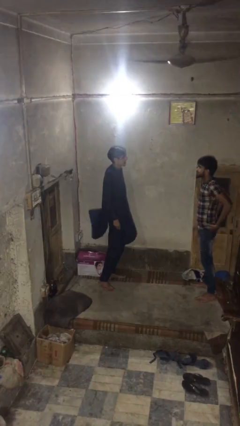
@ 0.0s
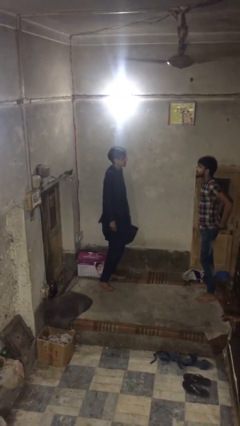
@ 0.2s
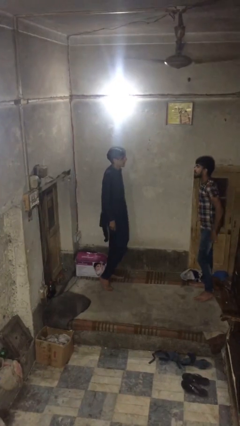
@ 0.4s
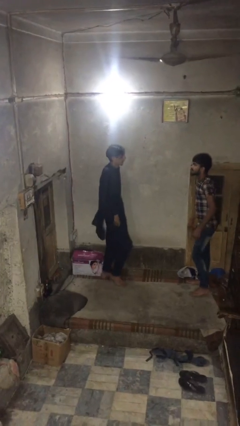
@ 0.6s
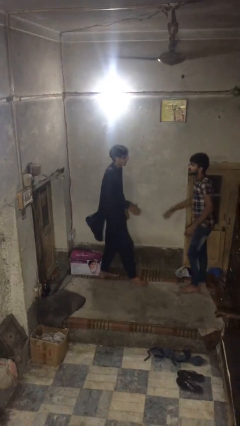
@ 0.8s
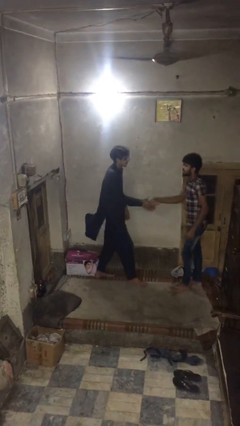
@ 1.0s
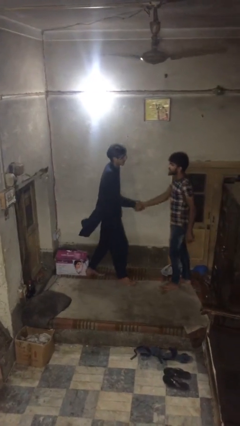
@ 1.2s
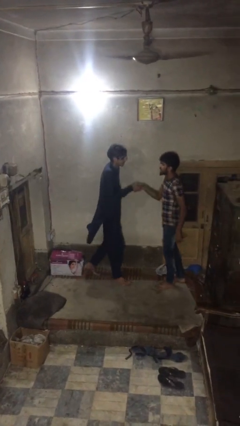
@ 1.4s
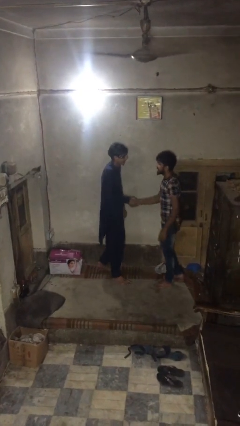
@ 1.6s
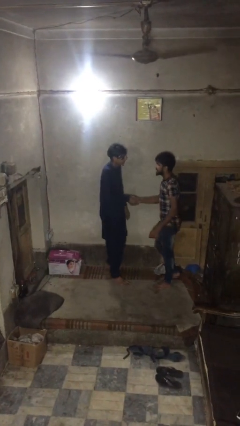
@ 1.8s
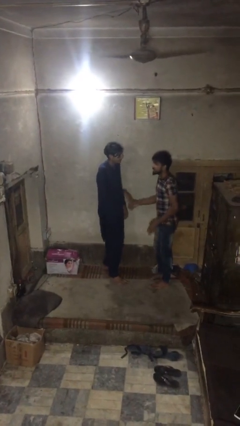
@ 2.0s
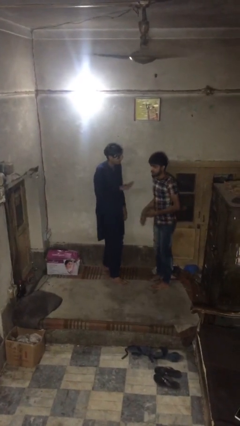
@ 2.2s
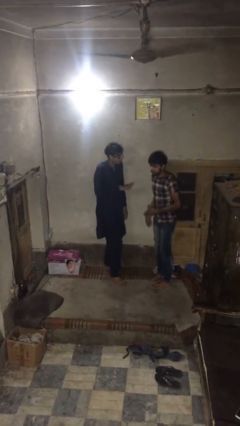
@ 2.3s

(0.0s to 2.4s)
person shakes hand

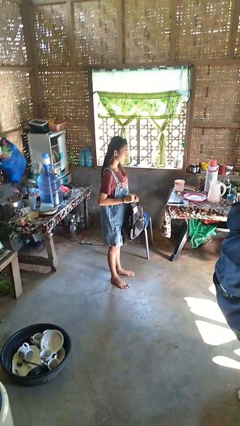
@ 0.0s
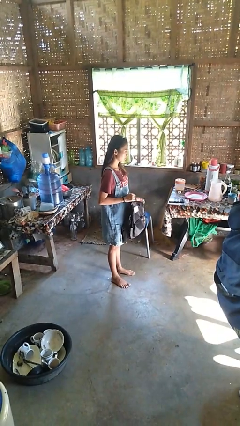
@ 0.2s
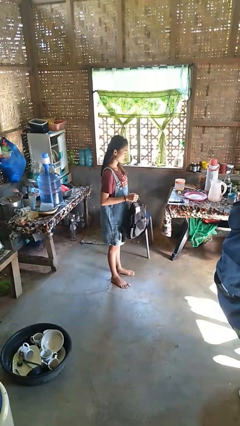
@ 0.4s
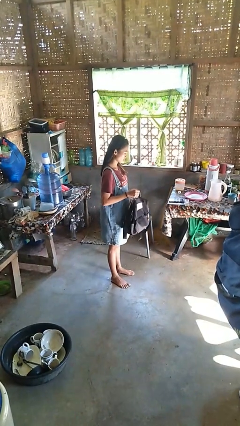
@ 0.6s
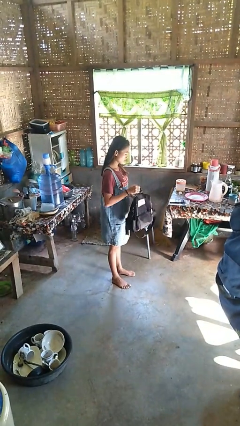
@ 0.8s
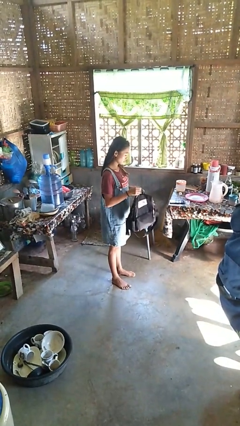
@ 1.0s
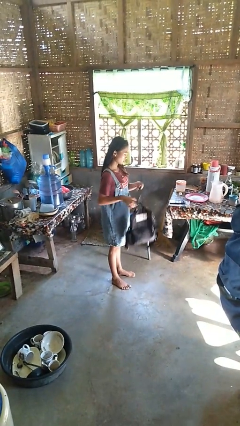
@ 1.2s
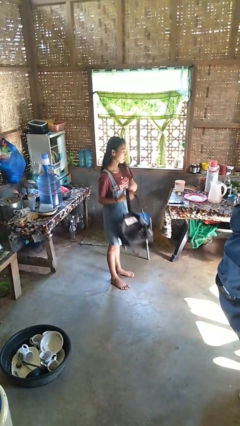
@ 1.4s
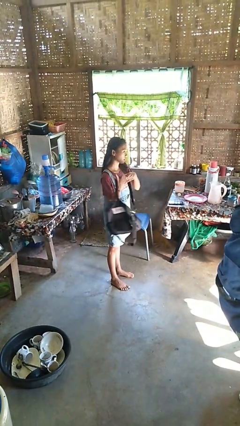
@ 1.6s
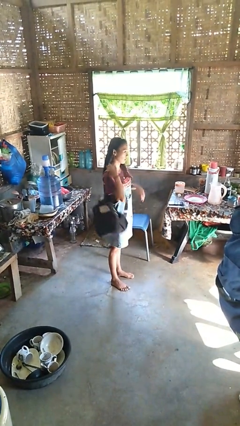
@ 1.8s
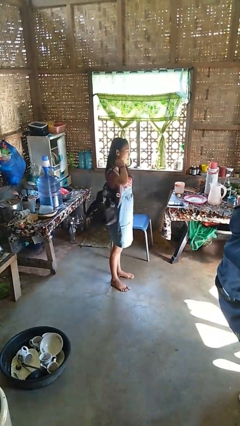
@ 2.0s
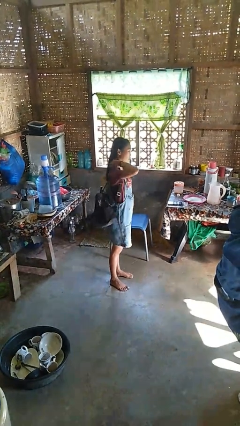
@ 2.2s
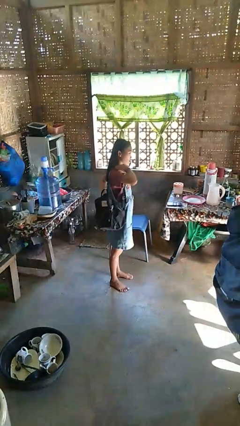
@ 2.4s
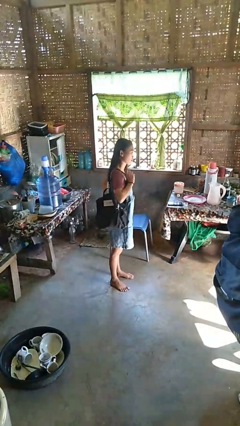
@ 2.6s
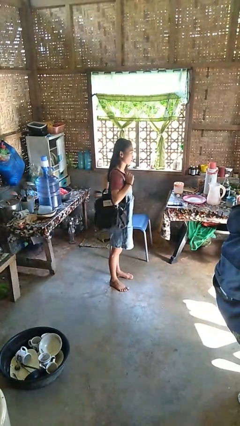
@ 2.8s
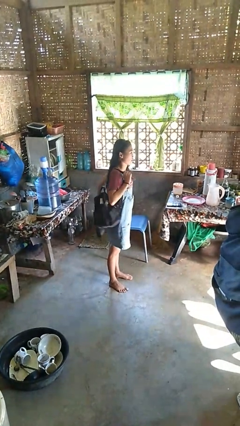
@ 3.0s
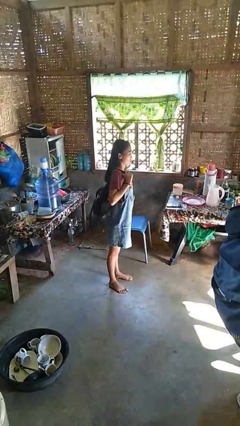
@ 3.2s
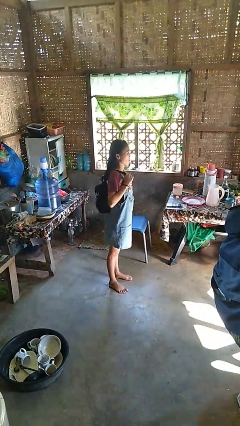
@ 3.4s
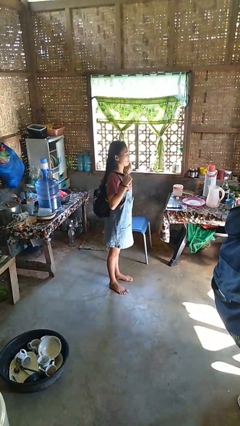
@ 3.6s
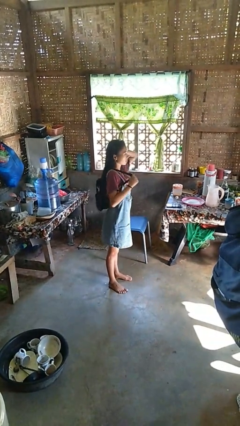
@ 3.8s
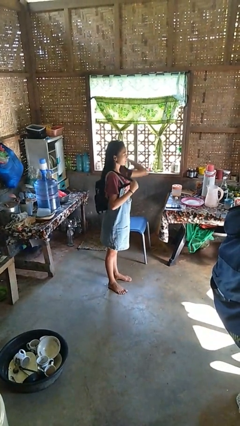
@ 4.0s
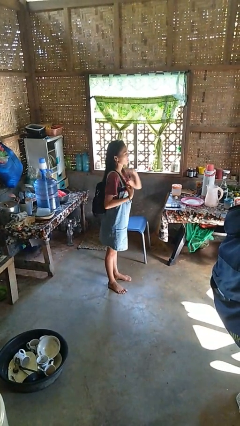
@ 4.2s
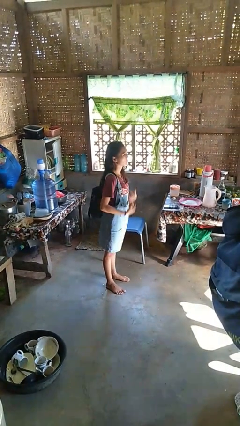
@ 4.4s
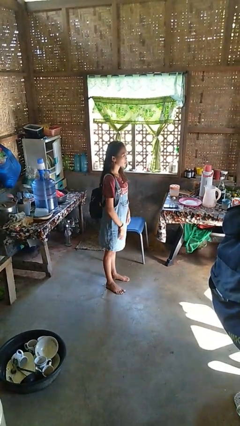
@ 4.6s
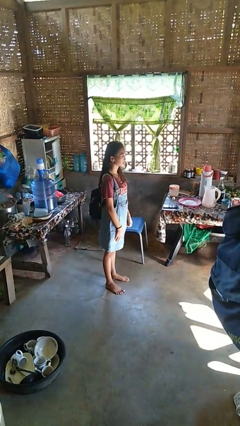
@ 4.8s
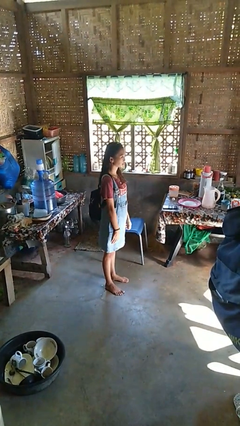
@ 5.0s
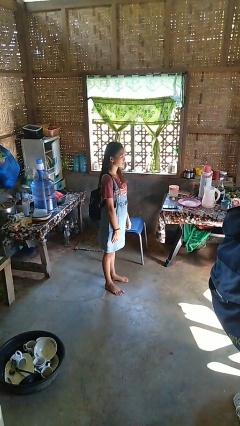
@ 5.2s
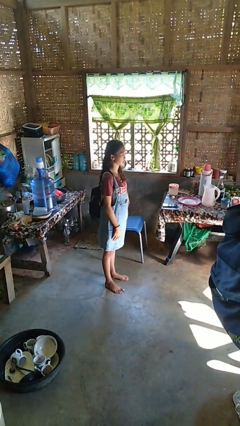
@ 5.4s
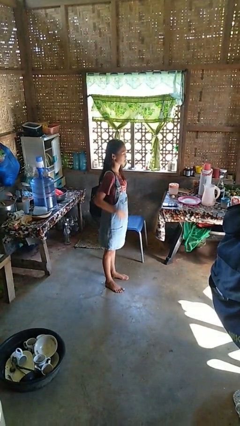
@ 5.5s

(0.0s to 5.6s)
person puts on backpack

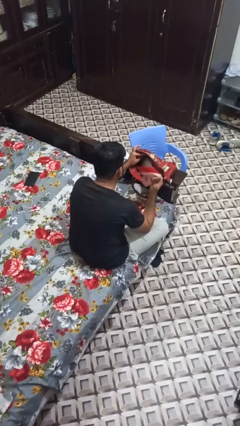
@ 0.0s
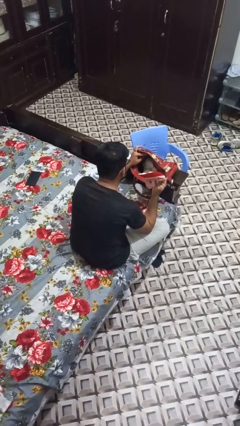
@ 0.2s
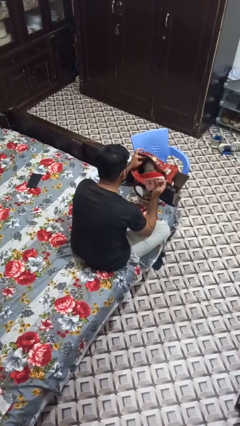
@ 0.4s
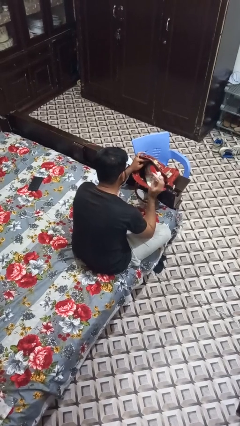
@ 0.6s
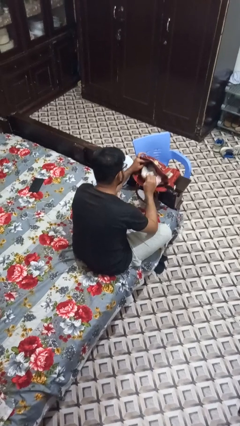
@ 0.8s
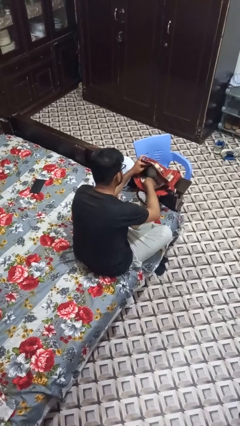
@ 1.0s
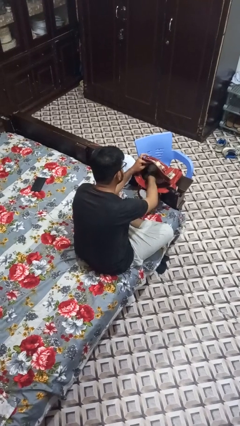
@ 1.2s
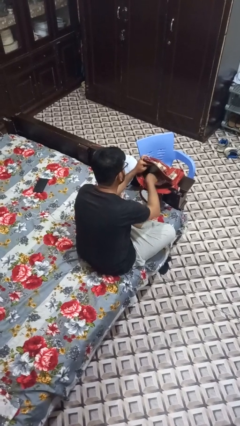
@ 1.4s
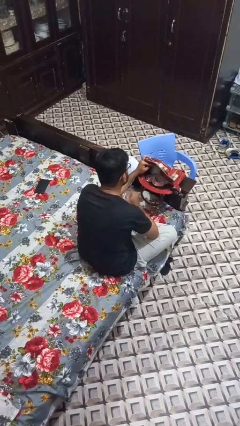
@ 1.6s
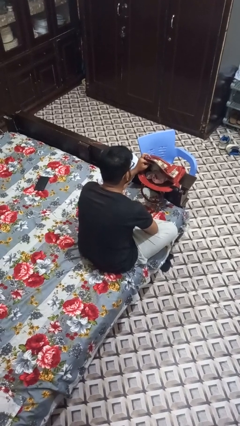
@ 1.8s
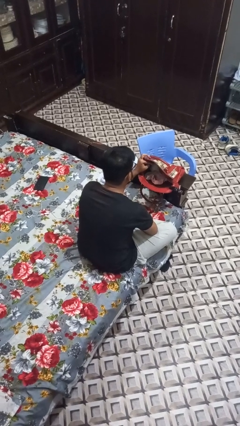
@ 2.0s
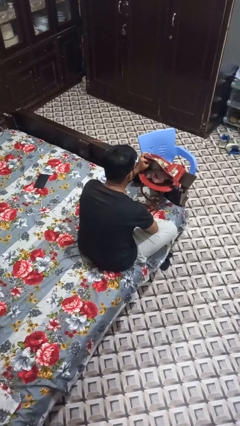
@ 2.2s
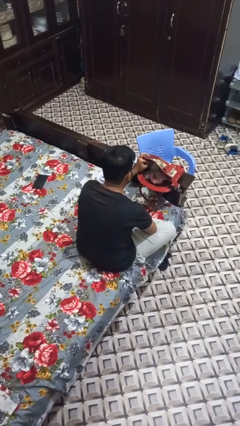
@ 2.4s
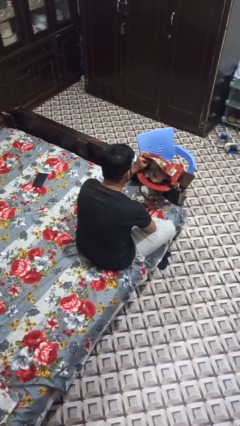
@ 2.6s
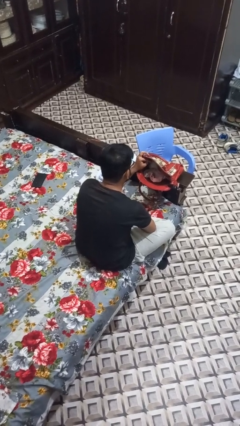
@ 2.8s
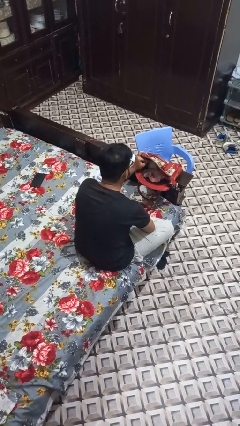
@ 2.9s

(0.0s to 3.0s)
person takes object from purse

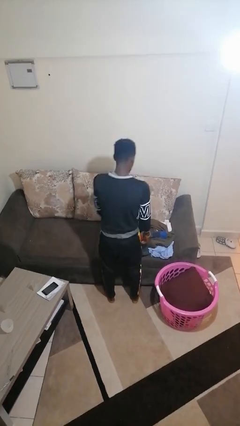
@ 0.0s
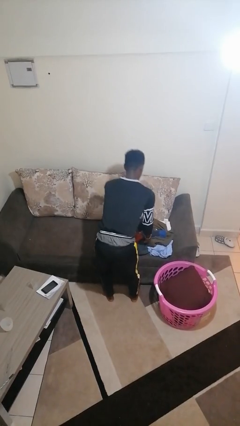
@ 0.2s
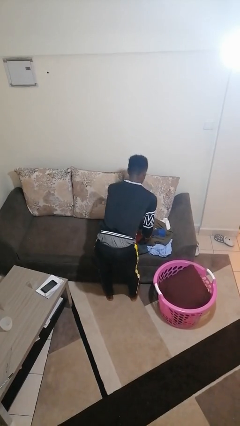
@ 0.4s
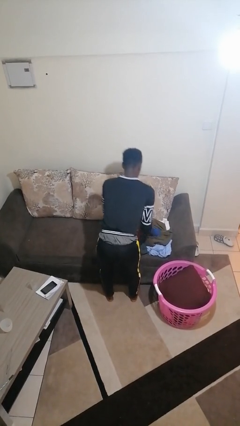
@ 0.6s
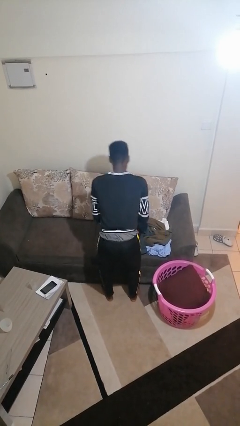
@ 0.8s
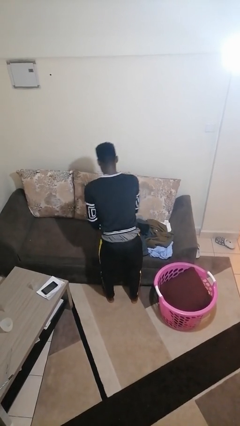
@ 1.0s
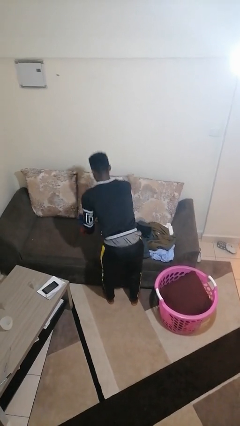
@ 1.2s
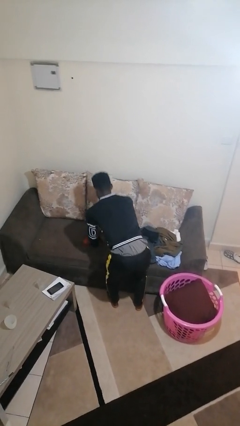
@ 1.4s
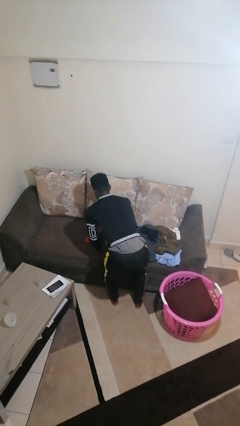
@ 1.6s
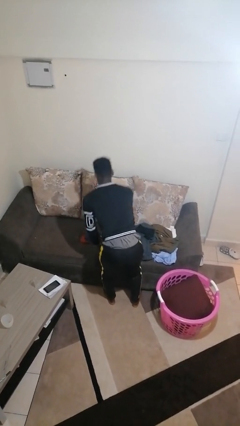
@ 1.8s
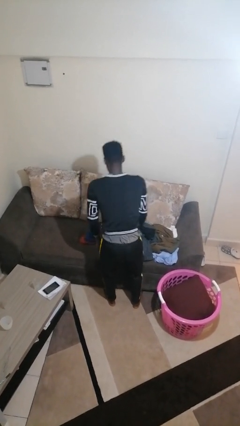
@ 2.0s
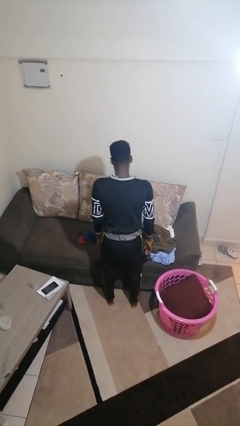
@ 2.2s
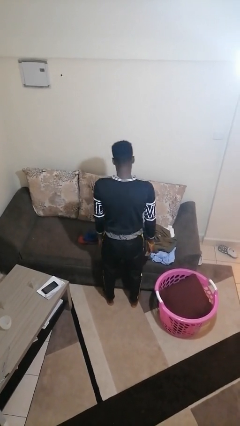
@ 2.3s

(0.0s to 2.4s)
person folds socks

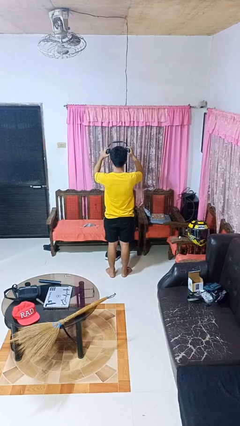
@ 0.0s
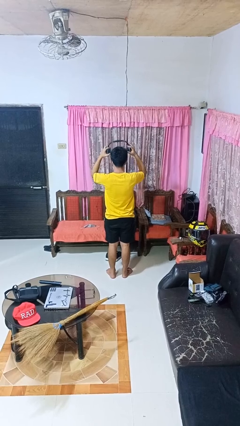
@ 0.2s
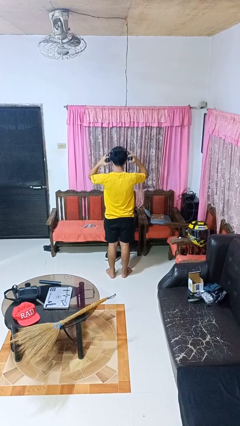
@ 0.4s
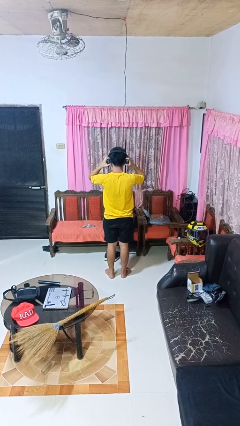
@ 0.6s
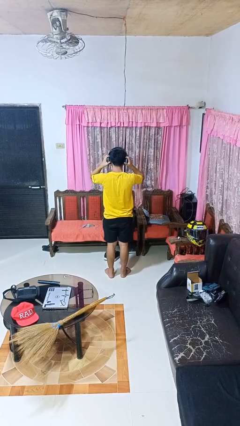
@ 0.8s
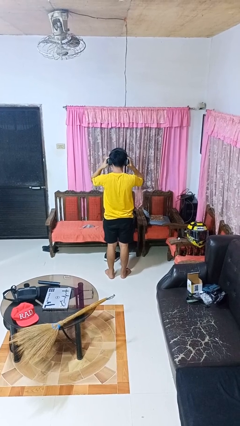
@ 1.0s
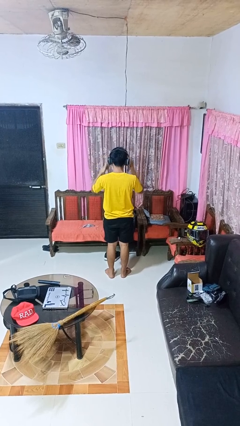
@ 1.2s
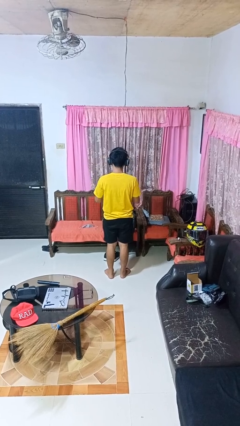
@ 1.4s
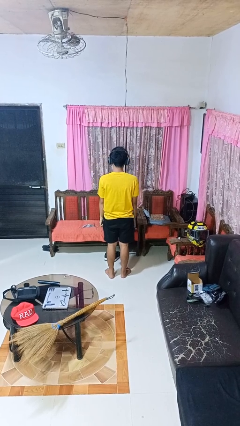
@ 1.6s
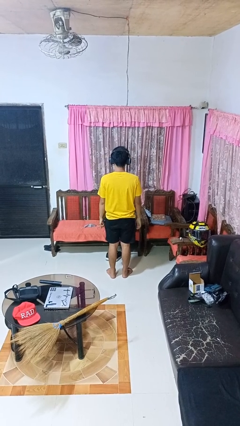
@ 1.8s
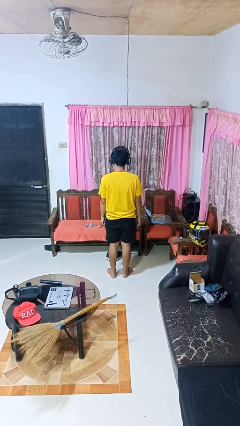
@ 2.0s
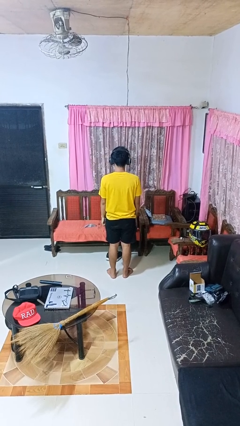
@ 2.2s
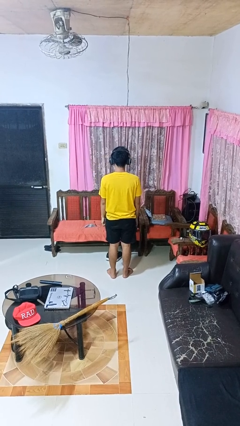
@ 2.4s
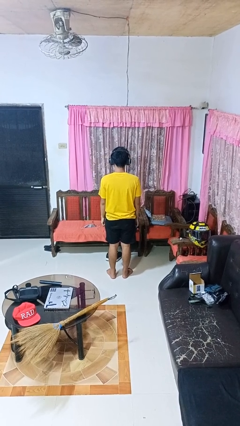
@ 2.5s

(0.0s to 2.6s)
person puts on headphones

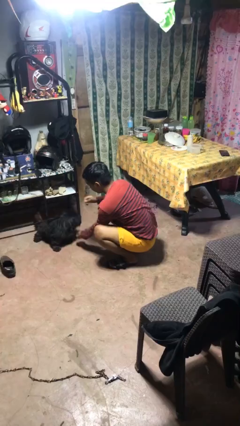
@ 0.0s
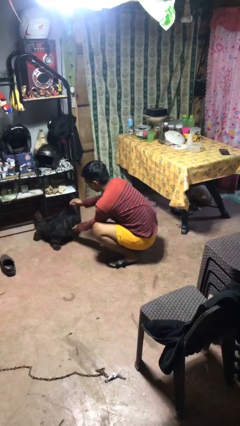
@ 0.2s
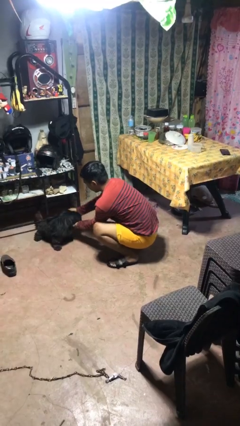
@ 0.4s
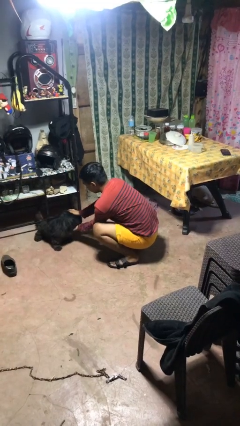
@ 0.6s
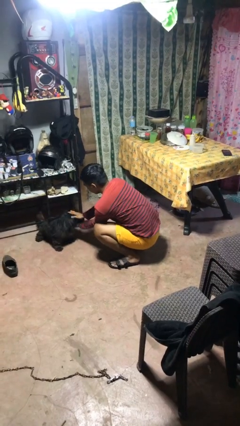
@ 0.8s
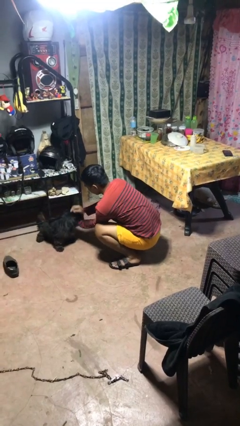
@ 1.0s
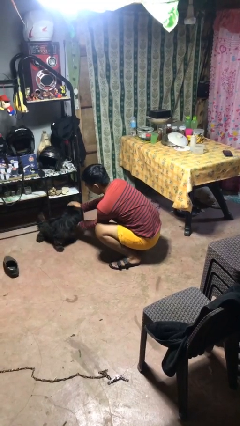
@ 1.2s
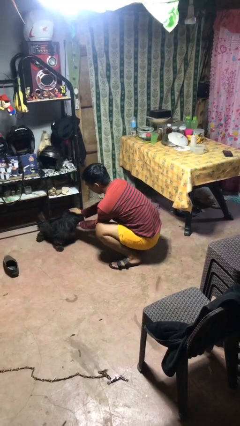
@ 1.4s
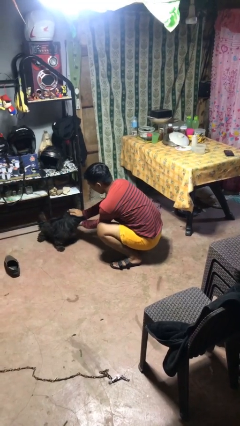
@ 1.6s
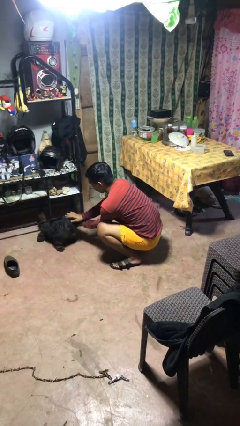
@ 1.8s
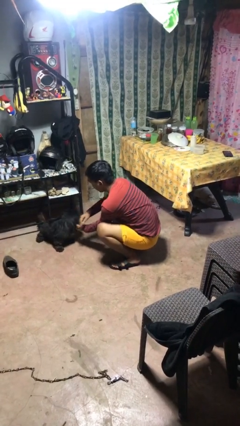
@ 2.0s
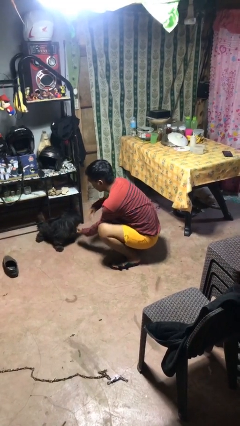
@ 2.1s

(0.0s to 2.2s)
person pets dog
